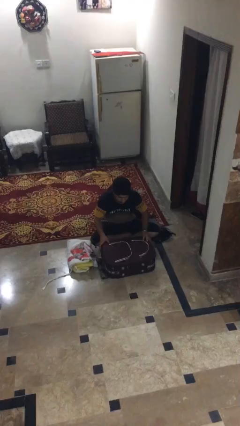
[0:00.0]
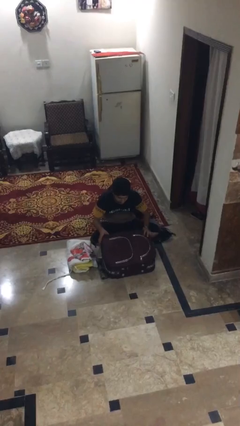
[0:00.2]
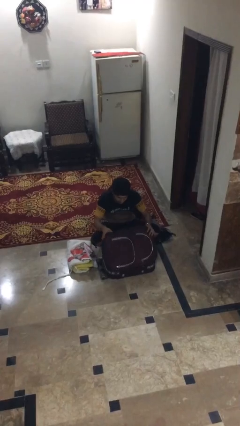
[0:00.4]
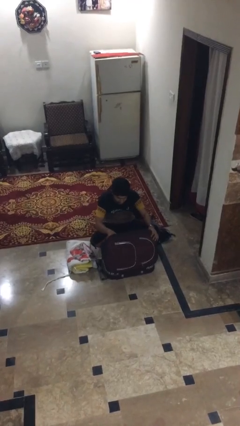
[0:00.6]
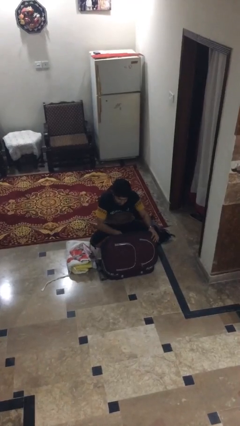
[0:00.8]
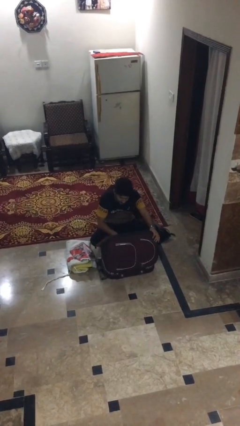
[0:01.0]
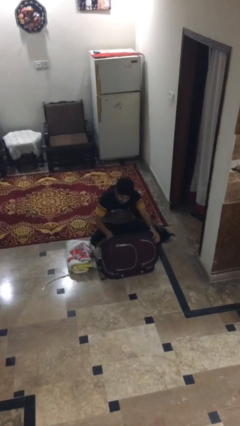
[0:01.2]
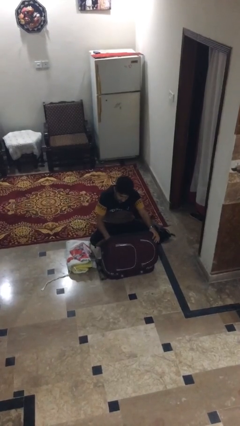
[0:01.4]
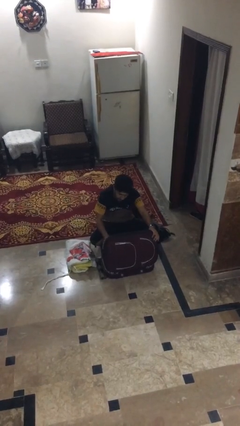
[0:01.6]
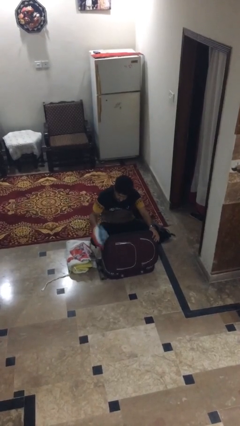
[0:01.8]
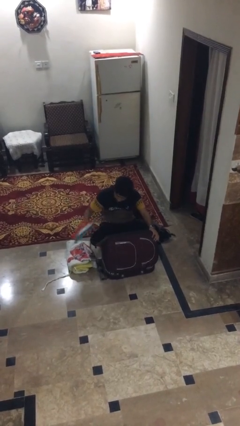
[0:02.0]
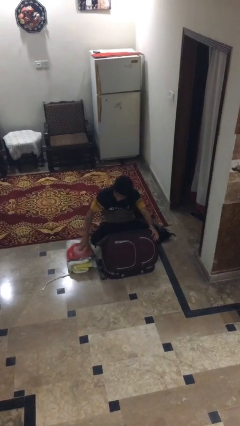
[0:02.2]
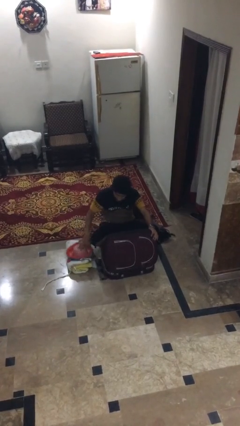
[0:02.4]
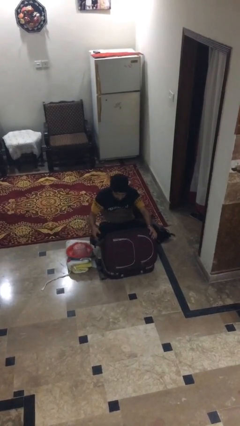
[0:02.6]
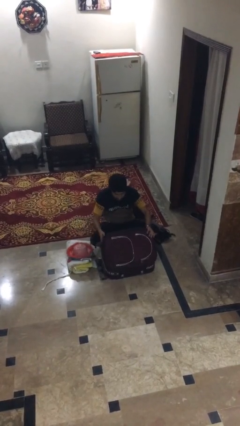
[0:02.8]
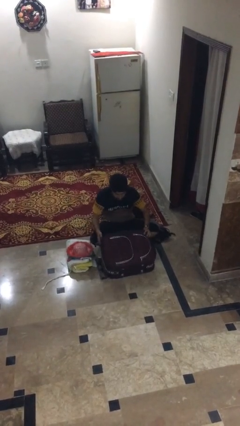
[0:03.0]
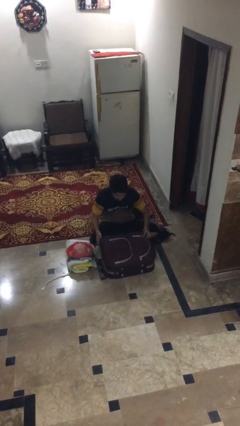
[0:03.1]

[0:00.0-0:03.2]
person unloads clothes from suitcase

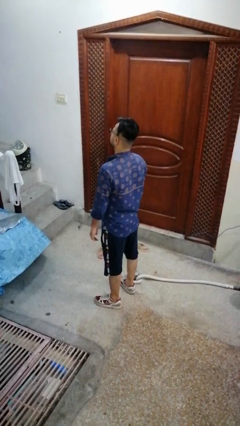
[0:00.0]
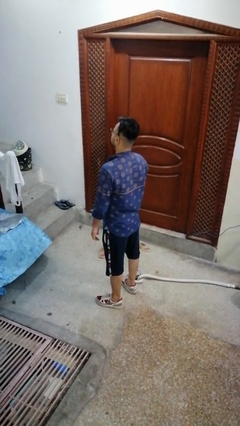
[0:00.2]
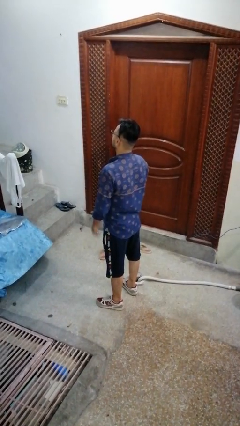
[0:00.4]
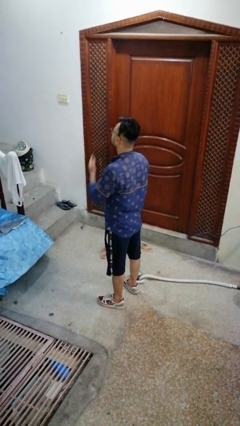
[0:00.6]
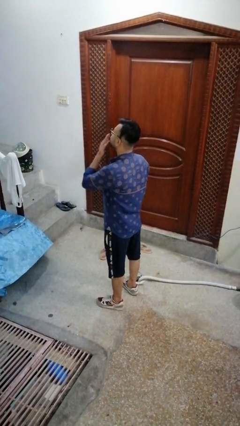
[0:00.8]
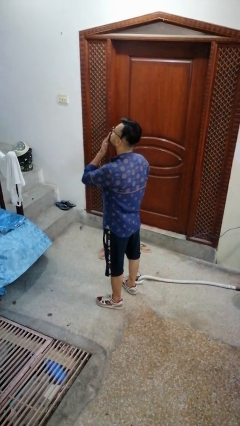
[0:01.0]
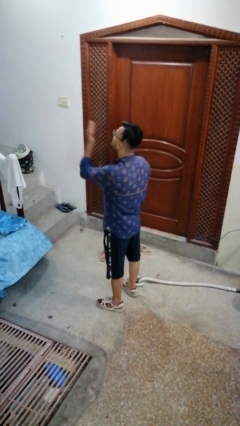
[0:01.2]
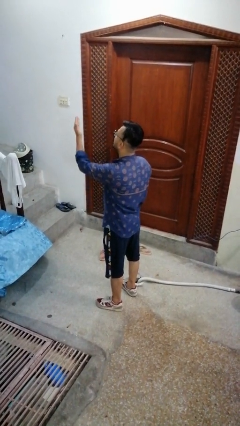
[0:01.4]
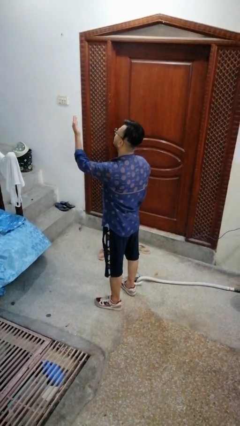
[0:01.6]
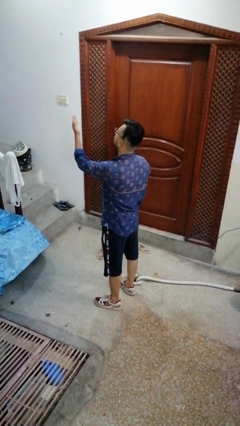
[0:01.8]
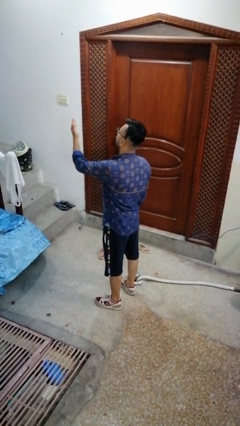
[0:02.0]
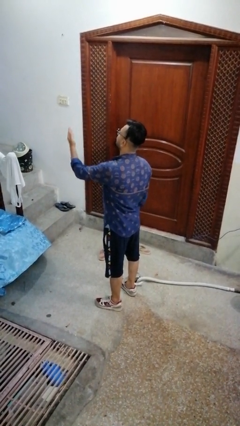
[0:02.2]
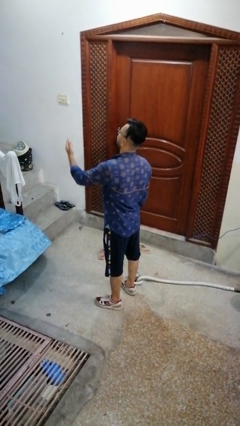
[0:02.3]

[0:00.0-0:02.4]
person gestures blow kiss

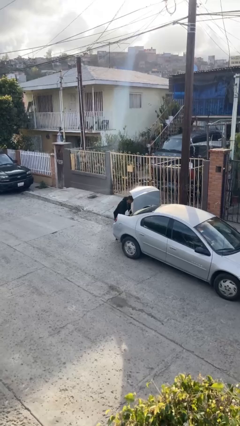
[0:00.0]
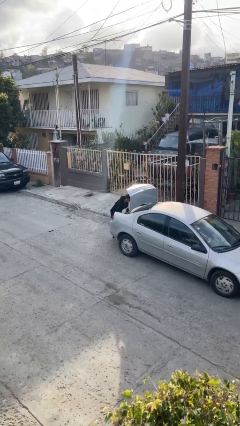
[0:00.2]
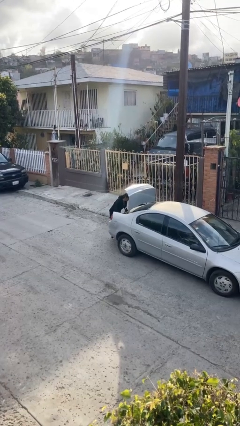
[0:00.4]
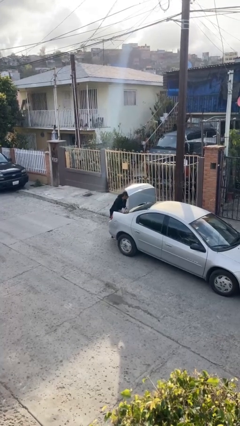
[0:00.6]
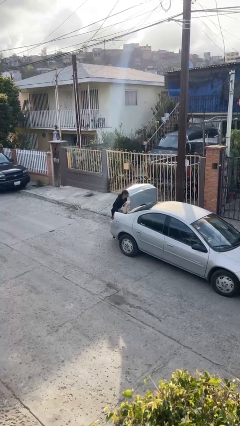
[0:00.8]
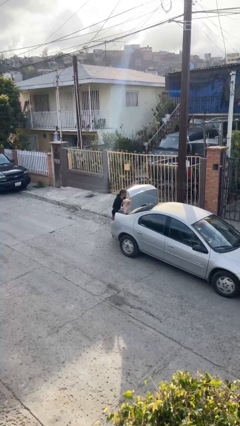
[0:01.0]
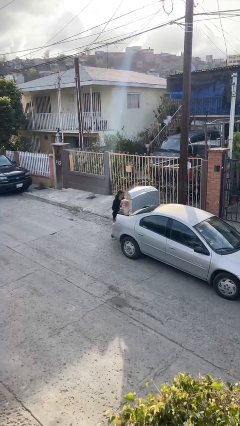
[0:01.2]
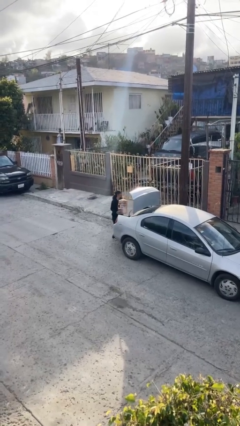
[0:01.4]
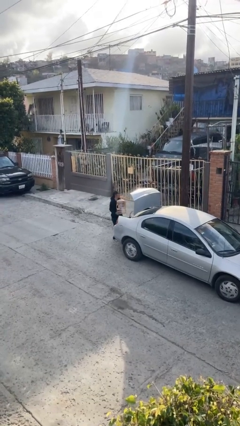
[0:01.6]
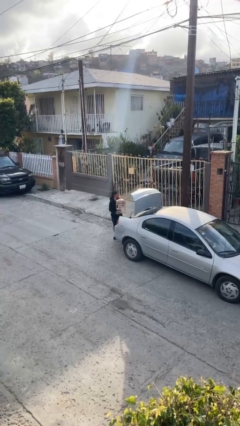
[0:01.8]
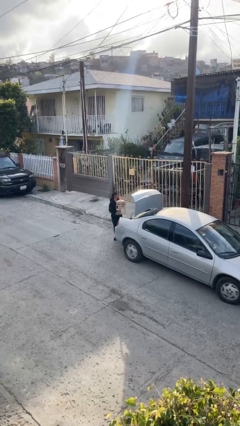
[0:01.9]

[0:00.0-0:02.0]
person unloads car

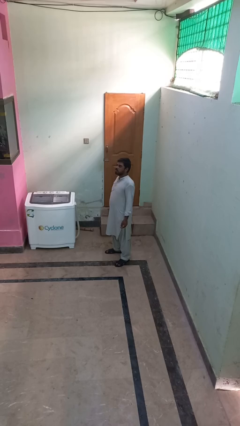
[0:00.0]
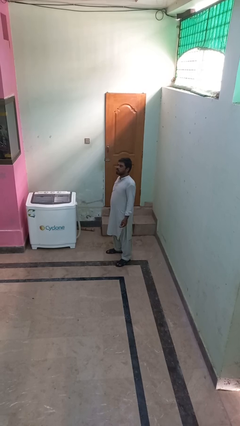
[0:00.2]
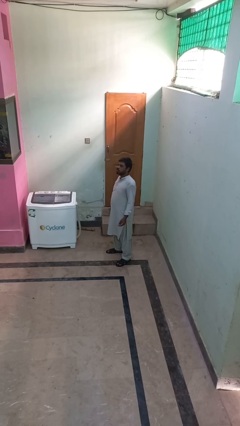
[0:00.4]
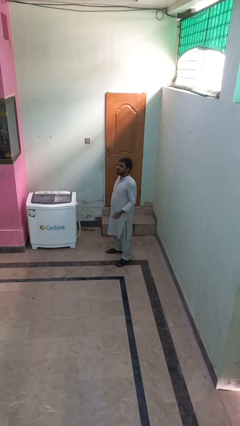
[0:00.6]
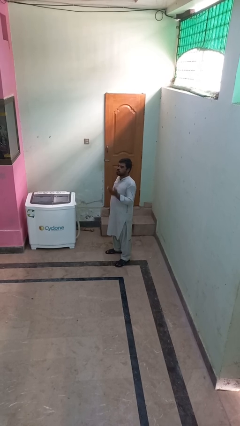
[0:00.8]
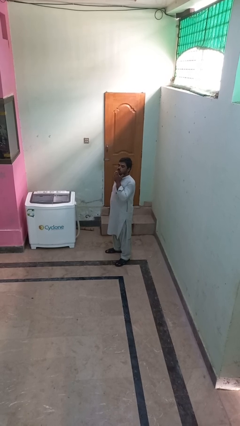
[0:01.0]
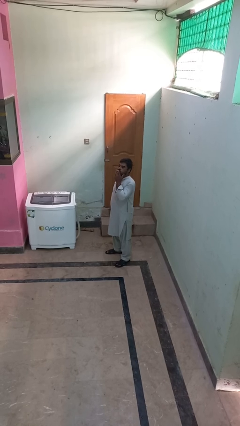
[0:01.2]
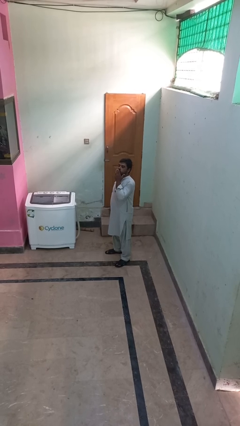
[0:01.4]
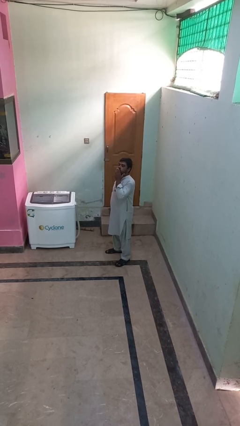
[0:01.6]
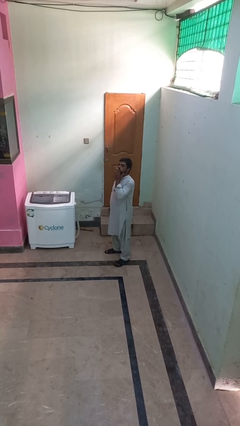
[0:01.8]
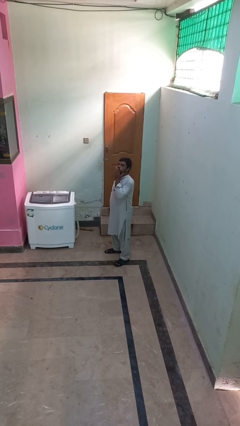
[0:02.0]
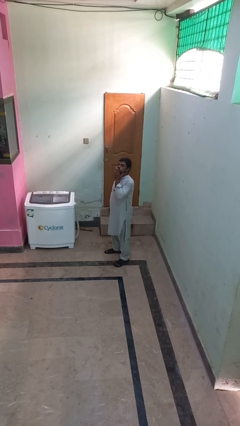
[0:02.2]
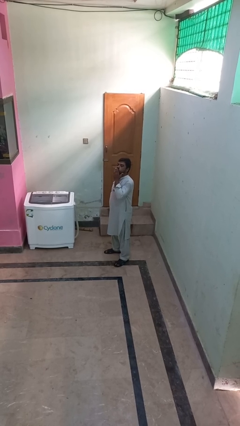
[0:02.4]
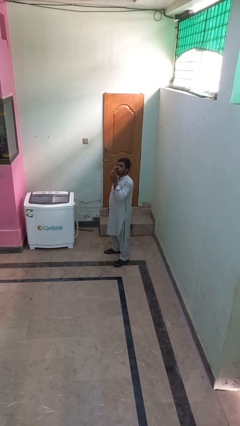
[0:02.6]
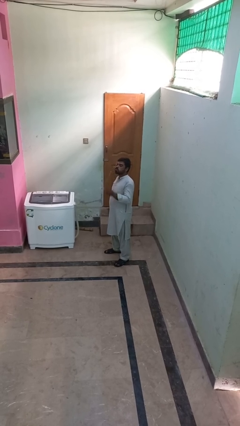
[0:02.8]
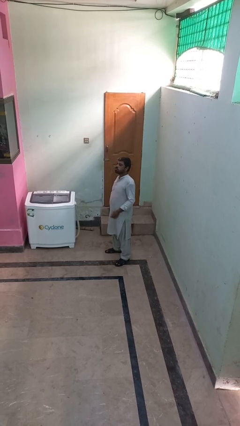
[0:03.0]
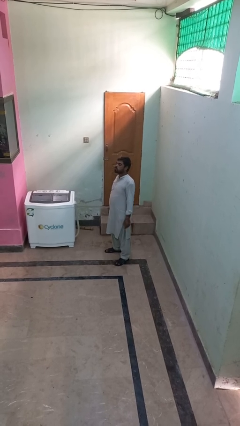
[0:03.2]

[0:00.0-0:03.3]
person vapes

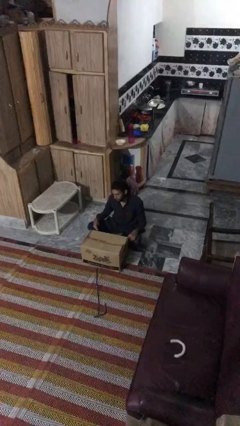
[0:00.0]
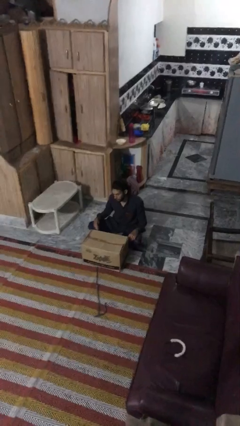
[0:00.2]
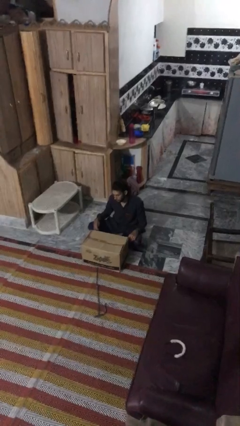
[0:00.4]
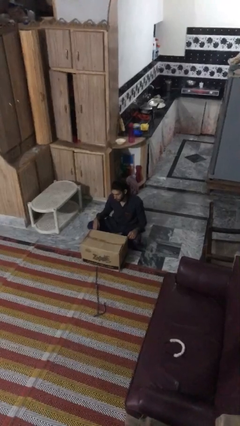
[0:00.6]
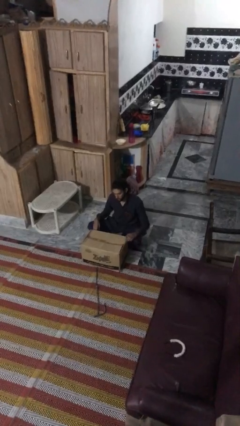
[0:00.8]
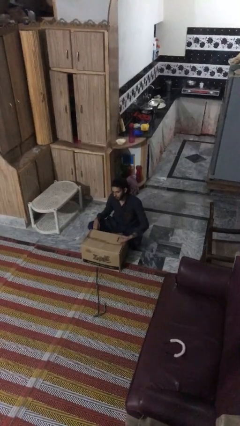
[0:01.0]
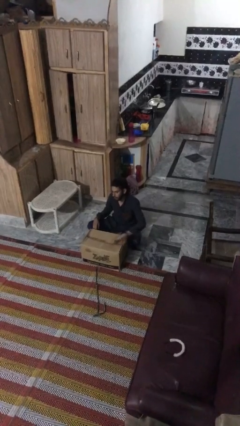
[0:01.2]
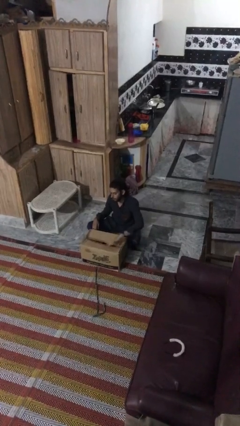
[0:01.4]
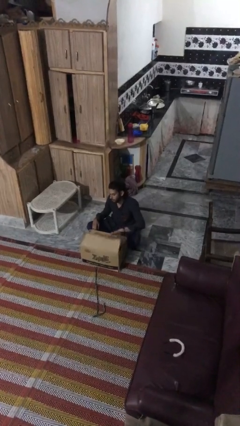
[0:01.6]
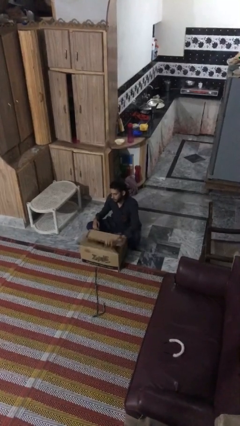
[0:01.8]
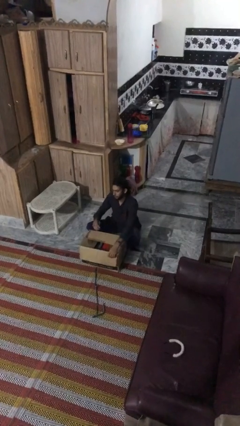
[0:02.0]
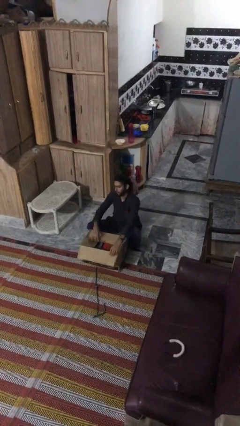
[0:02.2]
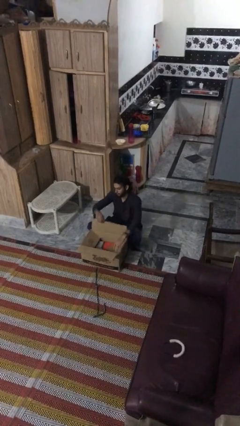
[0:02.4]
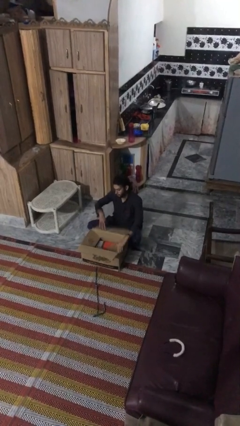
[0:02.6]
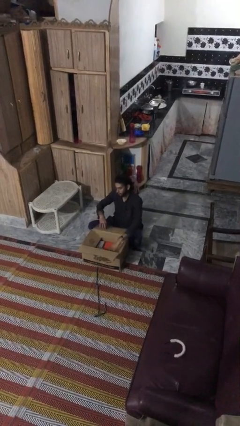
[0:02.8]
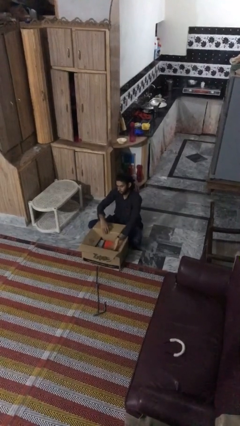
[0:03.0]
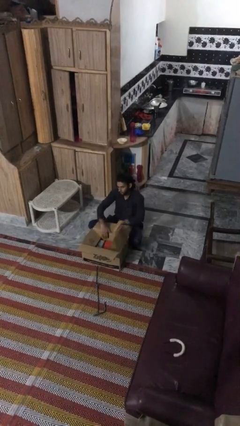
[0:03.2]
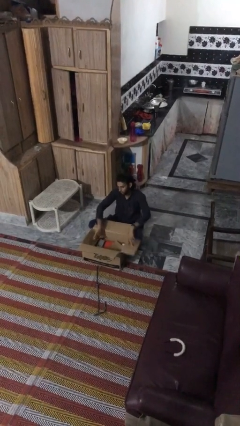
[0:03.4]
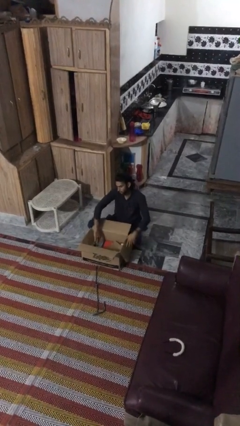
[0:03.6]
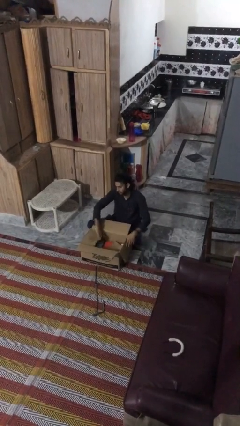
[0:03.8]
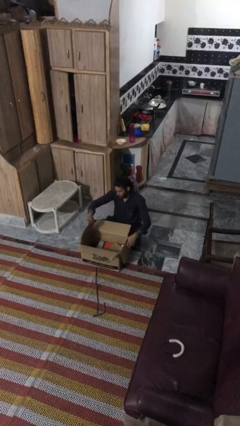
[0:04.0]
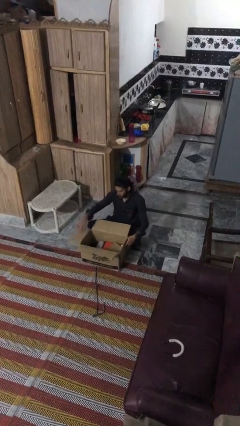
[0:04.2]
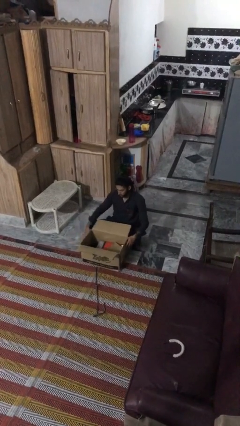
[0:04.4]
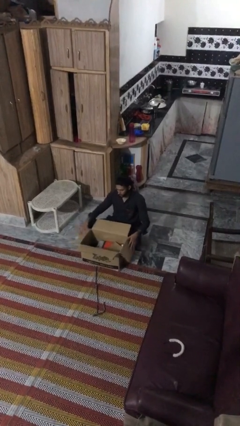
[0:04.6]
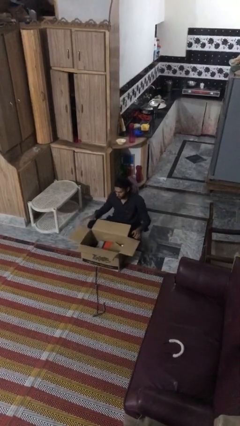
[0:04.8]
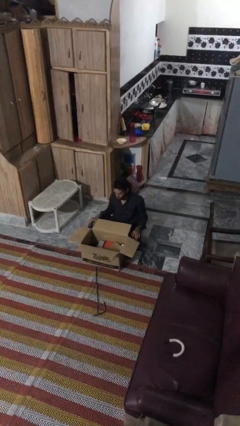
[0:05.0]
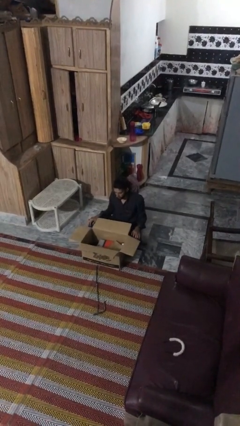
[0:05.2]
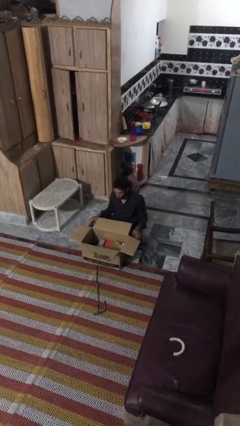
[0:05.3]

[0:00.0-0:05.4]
person opens box

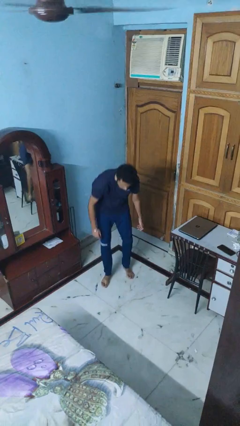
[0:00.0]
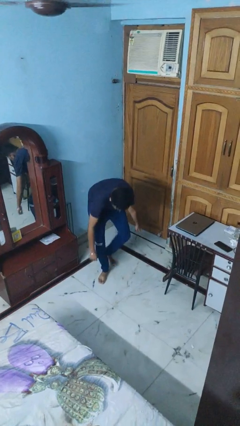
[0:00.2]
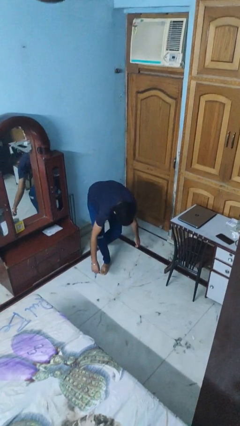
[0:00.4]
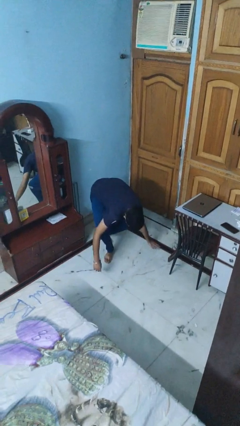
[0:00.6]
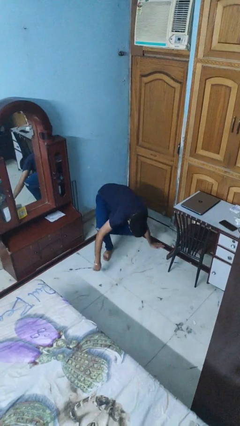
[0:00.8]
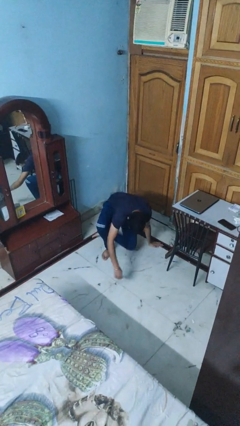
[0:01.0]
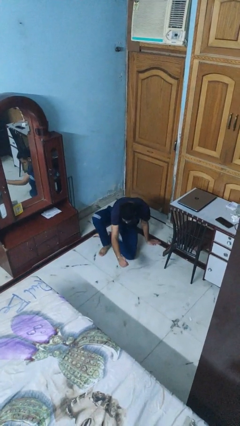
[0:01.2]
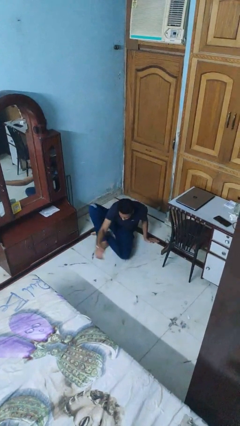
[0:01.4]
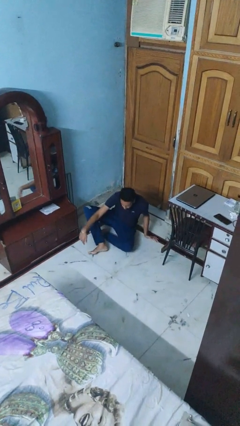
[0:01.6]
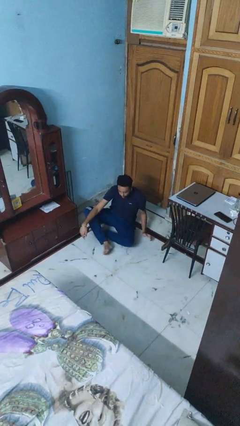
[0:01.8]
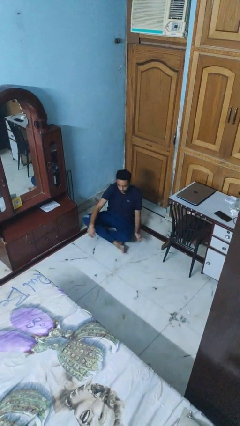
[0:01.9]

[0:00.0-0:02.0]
person sits crisscross
